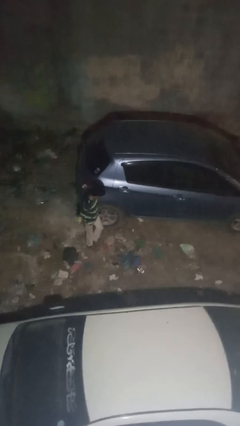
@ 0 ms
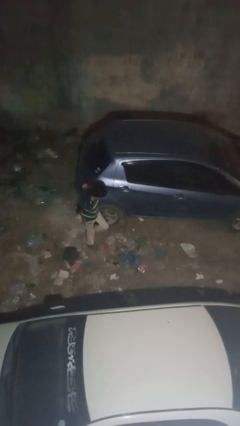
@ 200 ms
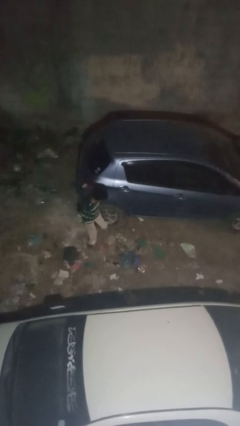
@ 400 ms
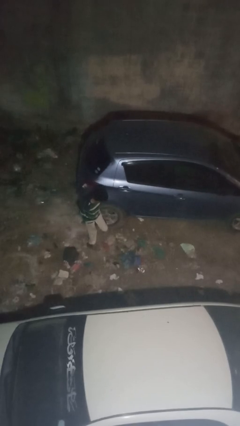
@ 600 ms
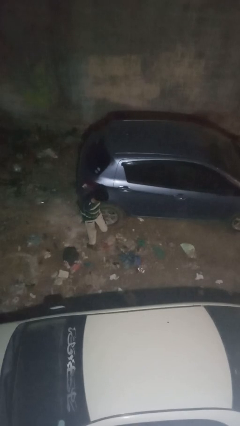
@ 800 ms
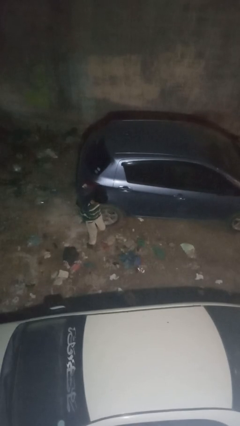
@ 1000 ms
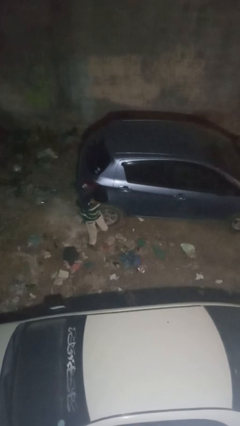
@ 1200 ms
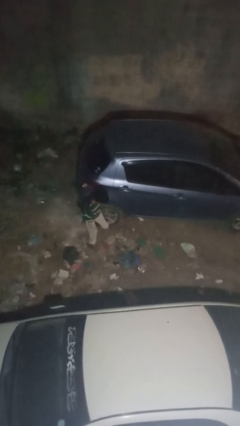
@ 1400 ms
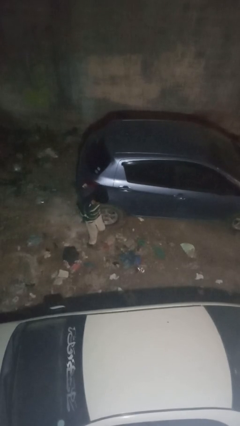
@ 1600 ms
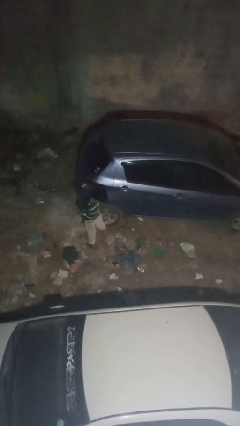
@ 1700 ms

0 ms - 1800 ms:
person kicks car tires

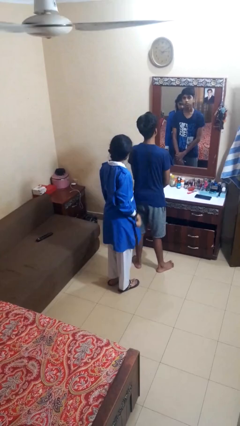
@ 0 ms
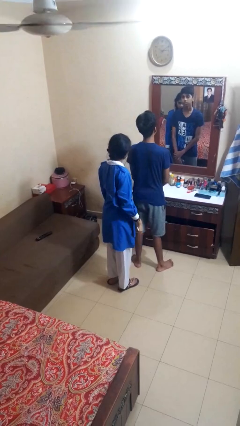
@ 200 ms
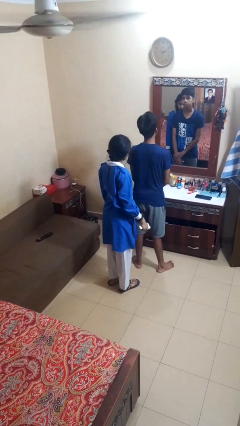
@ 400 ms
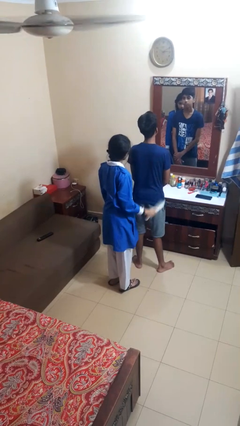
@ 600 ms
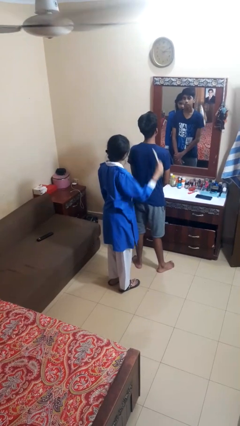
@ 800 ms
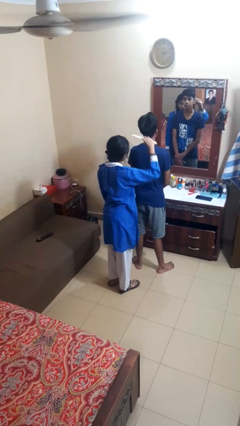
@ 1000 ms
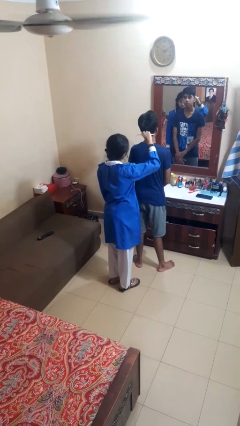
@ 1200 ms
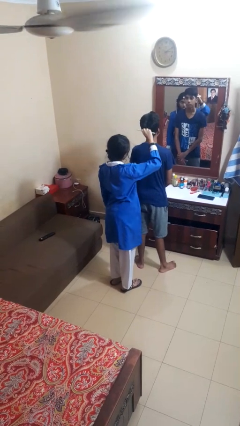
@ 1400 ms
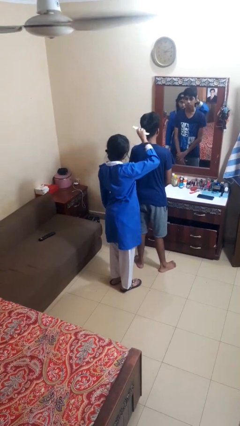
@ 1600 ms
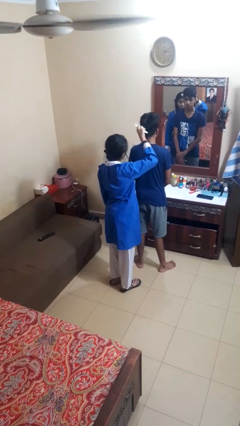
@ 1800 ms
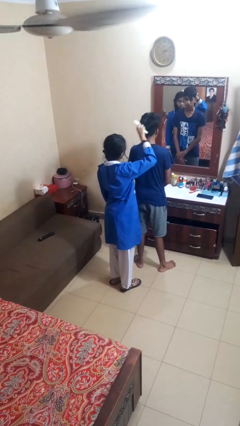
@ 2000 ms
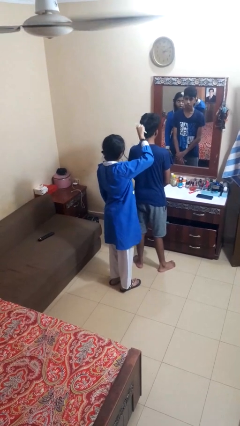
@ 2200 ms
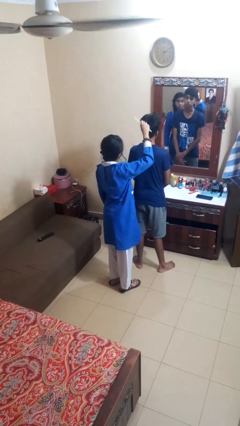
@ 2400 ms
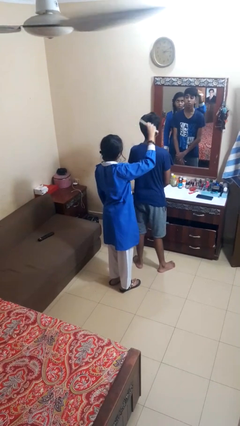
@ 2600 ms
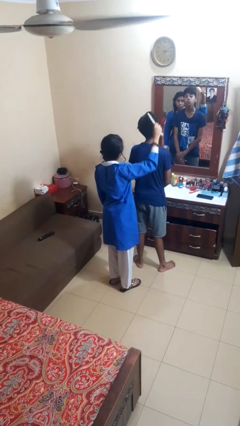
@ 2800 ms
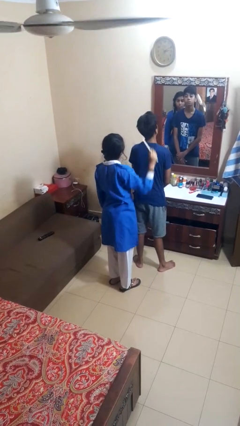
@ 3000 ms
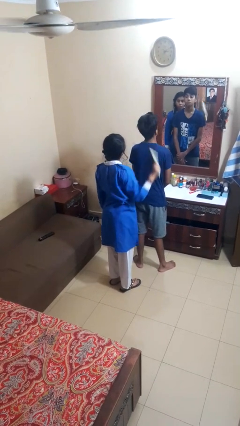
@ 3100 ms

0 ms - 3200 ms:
person brushes hair of person

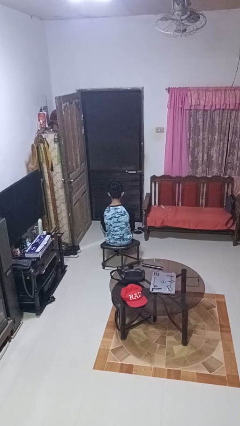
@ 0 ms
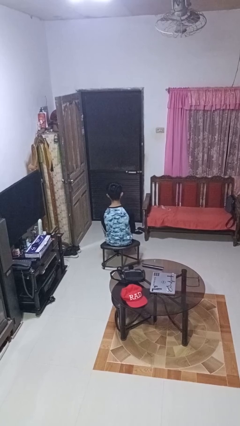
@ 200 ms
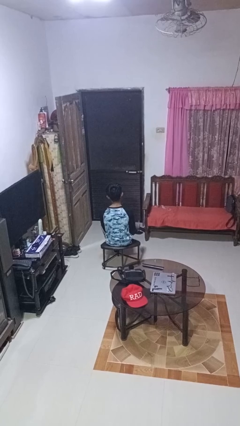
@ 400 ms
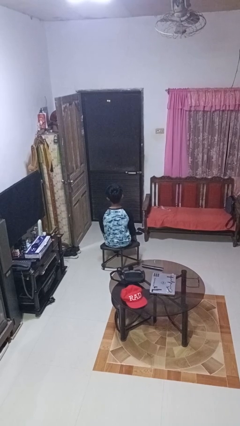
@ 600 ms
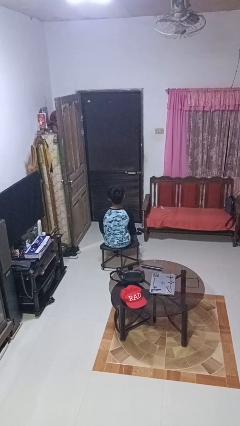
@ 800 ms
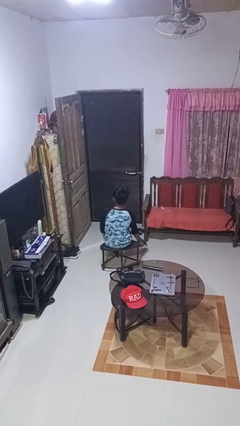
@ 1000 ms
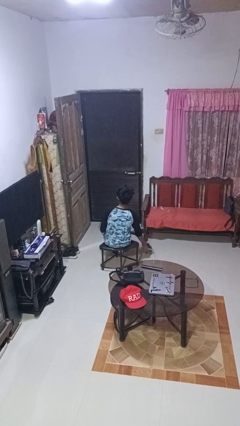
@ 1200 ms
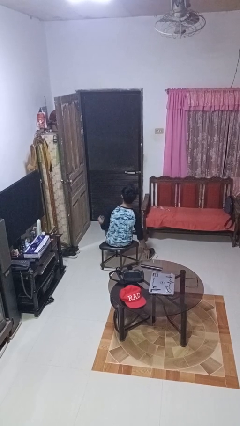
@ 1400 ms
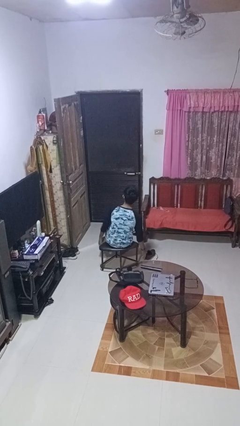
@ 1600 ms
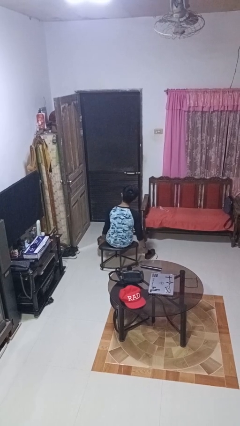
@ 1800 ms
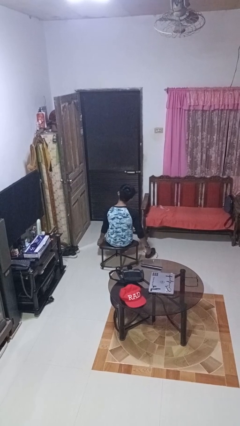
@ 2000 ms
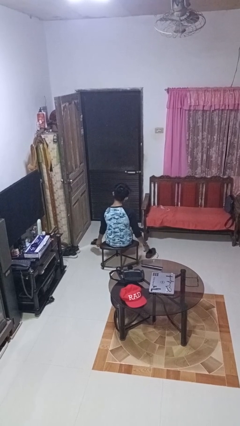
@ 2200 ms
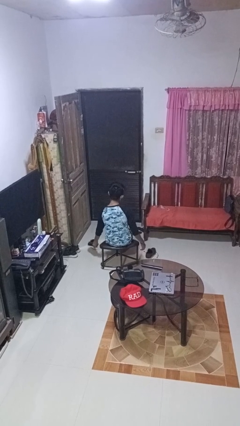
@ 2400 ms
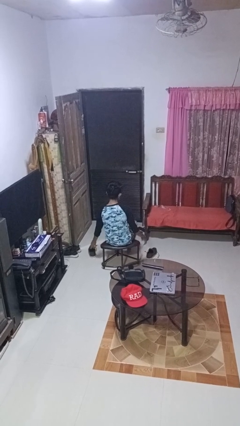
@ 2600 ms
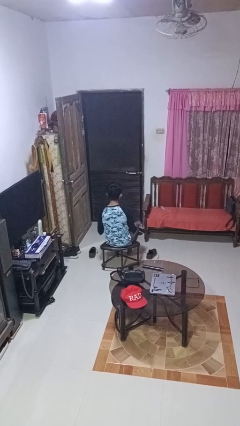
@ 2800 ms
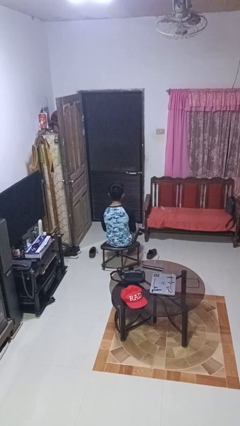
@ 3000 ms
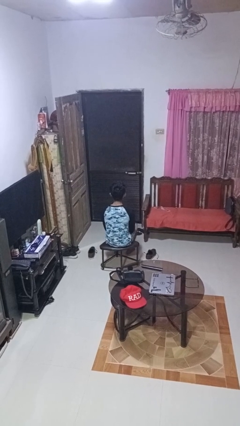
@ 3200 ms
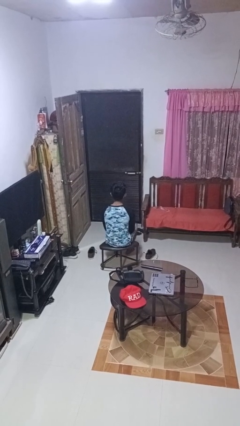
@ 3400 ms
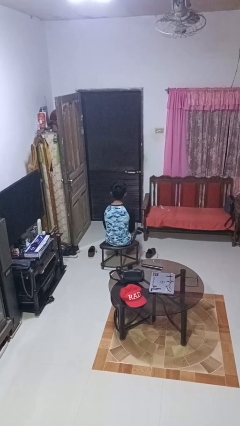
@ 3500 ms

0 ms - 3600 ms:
person takes off shoes

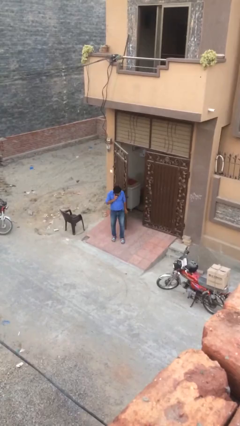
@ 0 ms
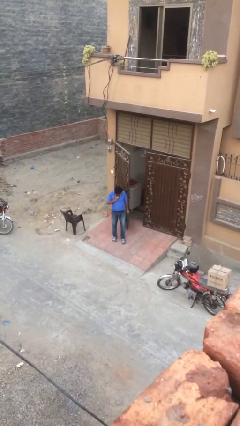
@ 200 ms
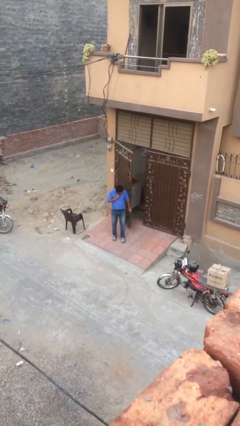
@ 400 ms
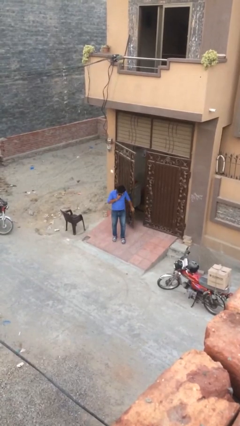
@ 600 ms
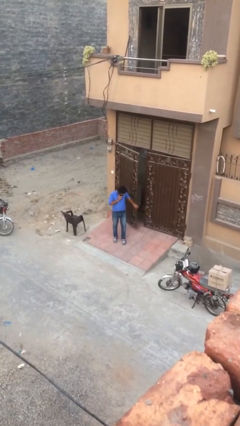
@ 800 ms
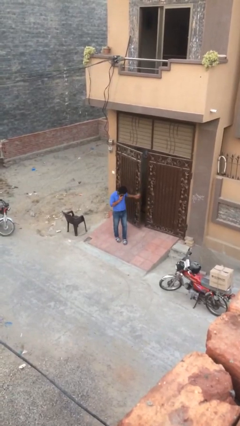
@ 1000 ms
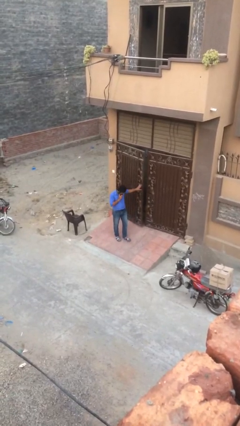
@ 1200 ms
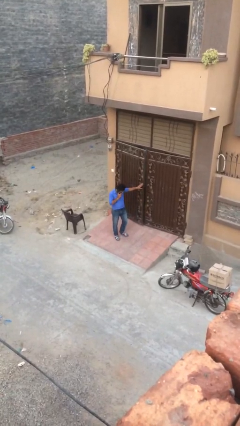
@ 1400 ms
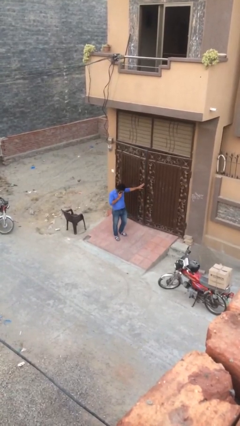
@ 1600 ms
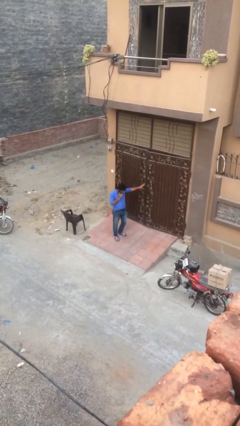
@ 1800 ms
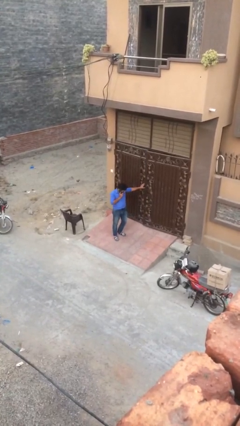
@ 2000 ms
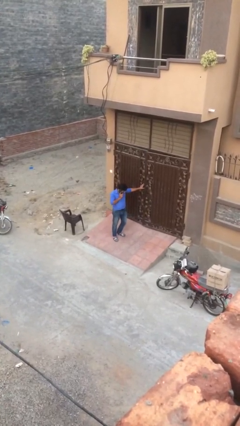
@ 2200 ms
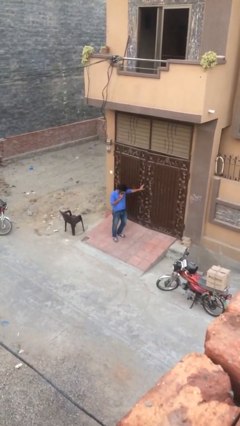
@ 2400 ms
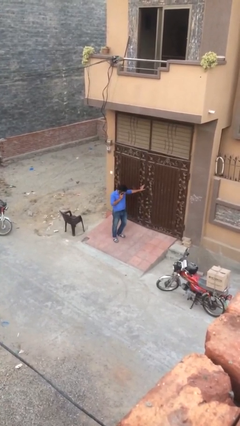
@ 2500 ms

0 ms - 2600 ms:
person closes facility door

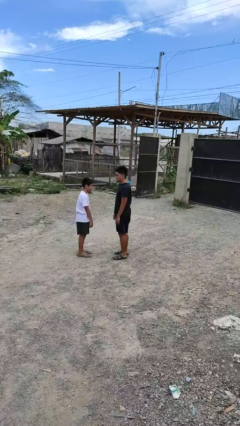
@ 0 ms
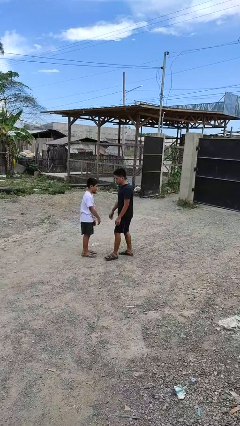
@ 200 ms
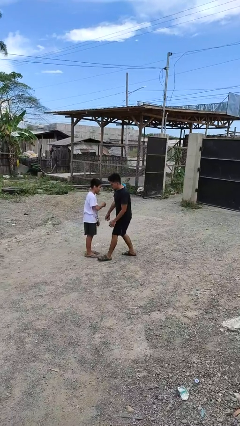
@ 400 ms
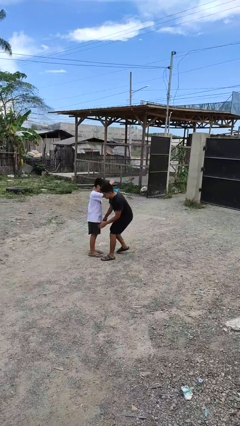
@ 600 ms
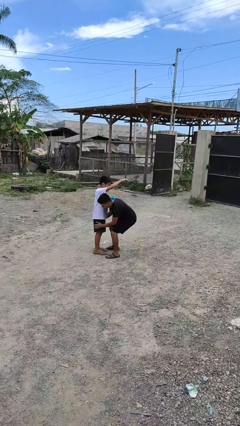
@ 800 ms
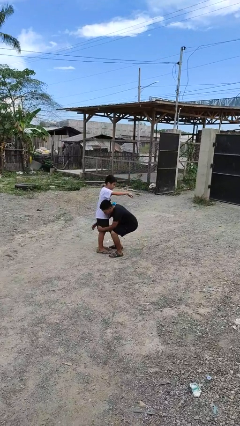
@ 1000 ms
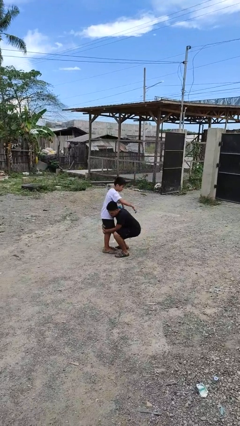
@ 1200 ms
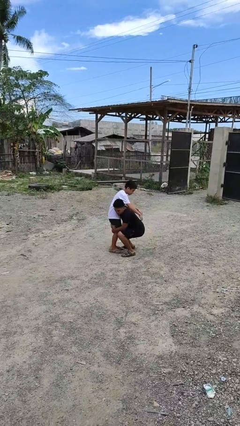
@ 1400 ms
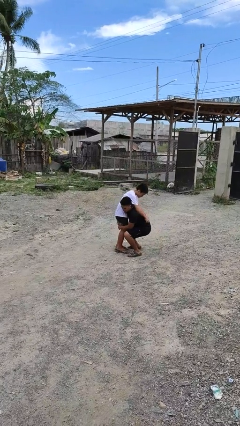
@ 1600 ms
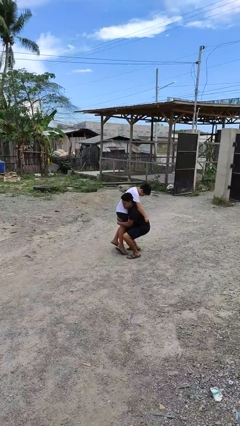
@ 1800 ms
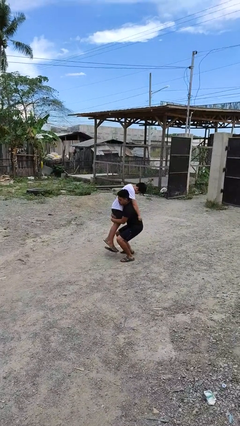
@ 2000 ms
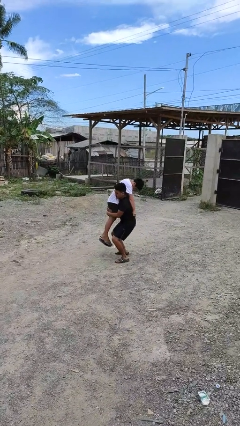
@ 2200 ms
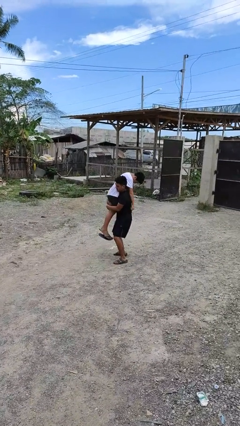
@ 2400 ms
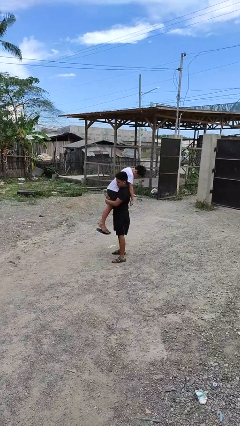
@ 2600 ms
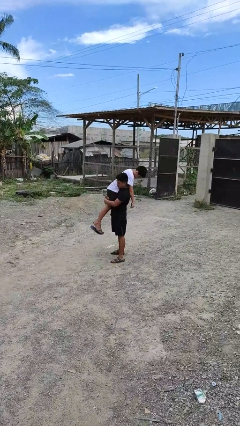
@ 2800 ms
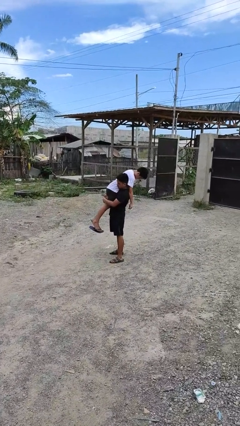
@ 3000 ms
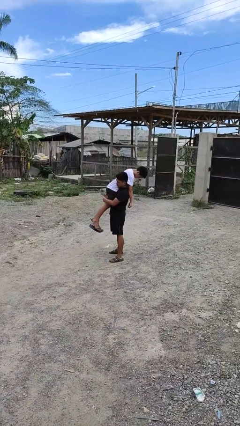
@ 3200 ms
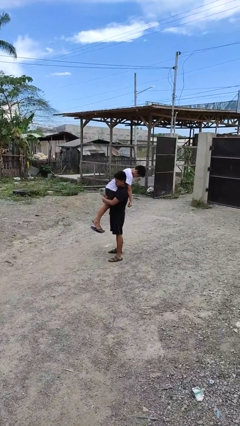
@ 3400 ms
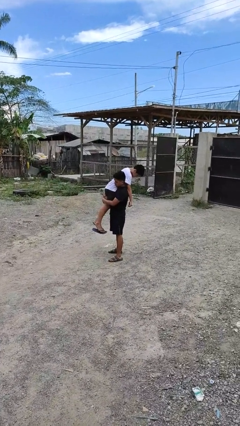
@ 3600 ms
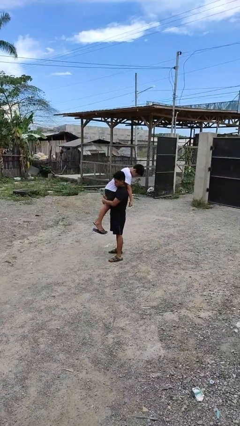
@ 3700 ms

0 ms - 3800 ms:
person carries person over shoulder

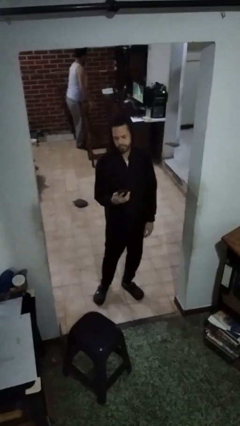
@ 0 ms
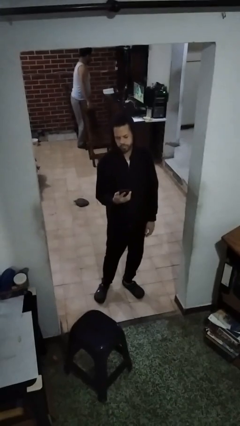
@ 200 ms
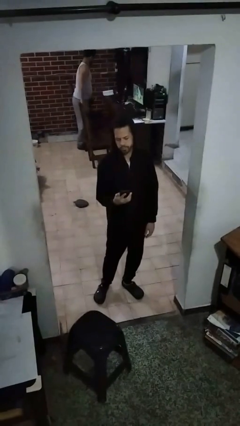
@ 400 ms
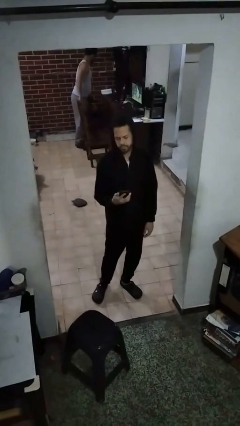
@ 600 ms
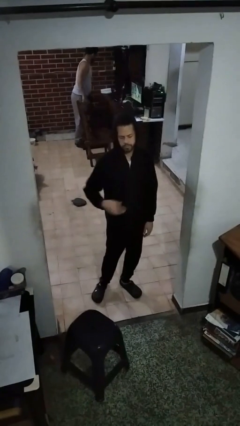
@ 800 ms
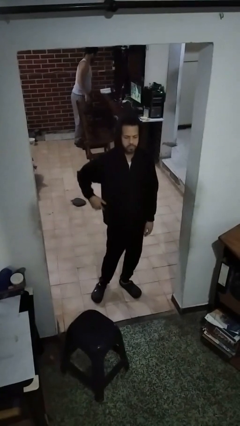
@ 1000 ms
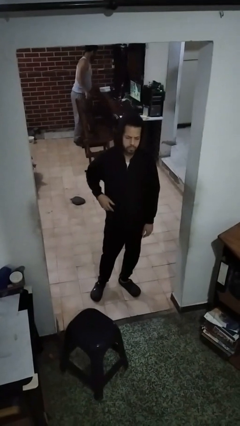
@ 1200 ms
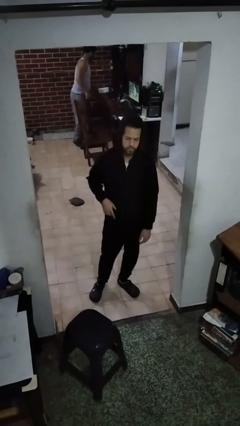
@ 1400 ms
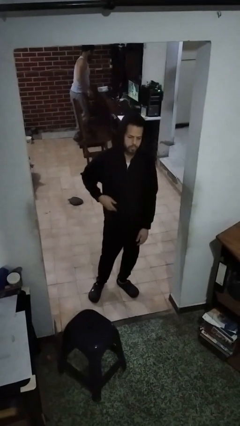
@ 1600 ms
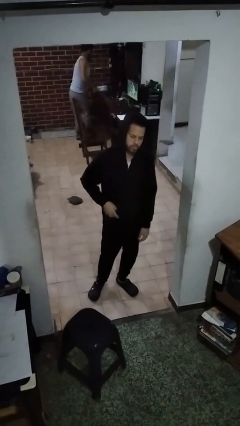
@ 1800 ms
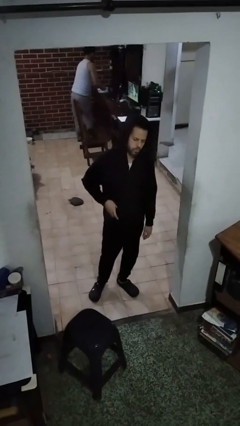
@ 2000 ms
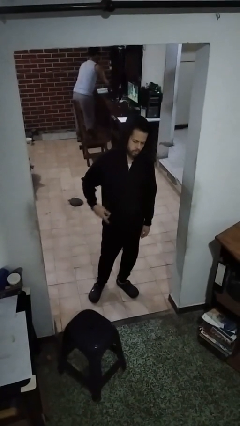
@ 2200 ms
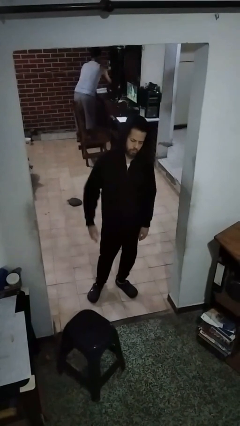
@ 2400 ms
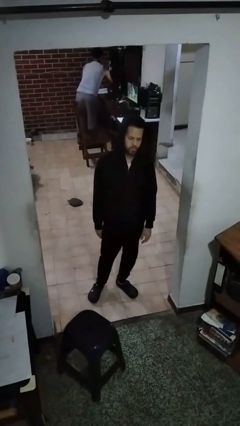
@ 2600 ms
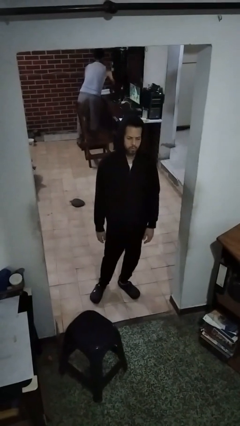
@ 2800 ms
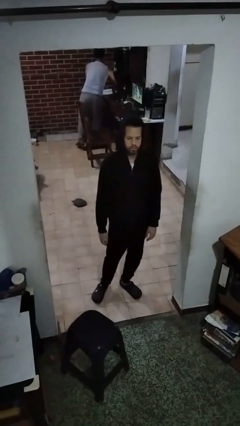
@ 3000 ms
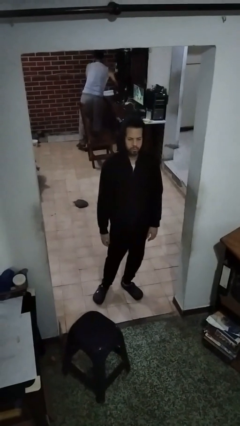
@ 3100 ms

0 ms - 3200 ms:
person puts phone into pocket
